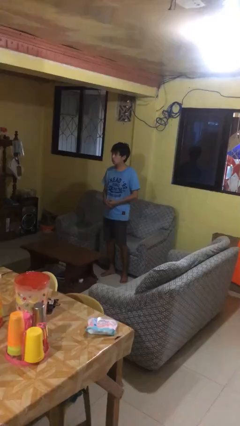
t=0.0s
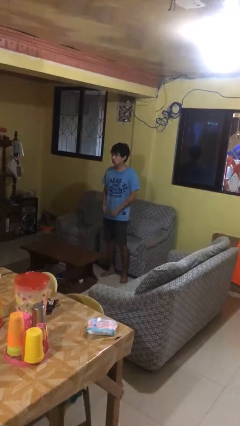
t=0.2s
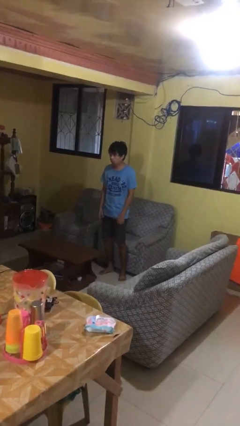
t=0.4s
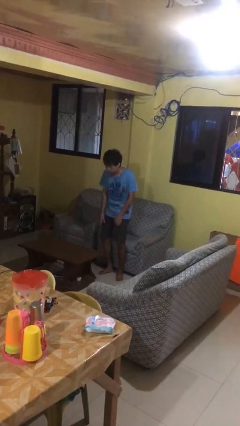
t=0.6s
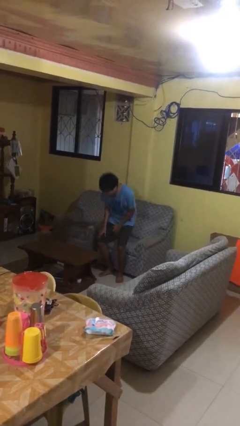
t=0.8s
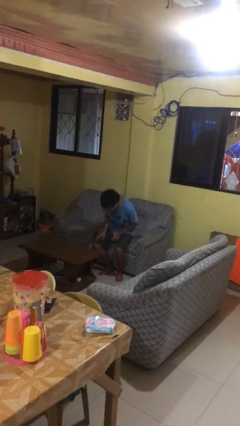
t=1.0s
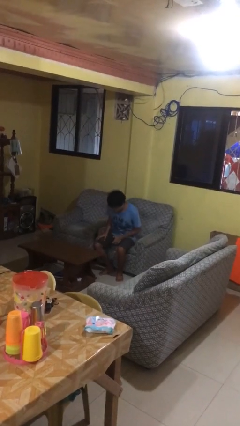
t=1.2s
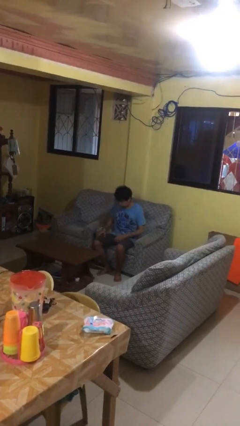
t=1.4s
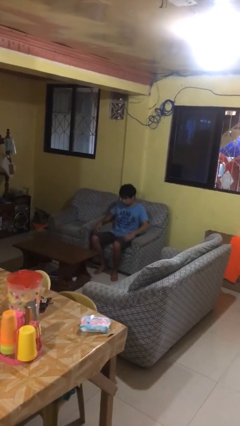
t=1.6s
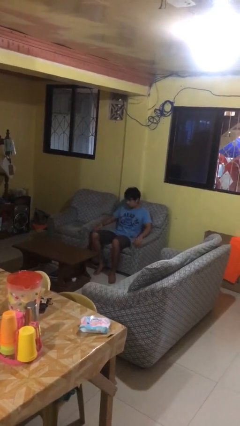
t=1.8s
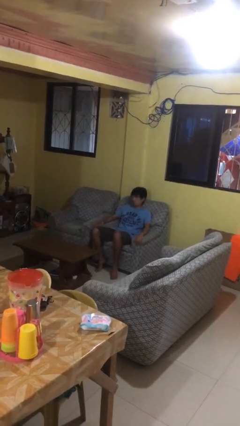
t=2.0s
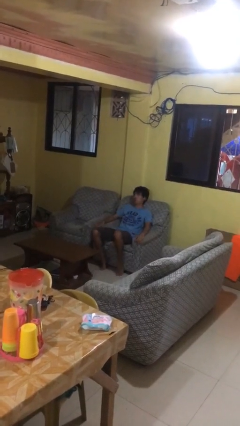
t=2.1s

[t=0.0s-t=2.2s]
person lies down on couch

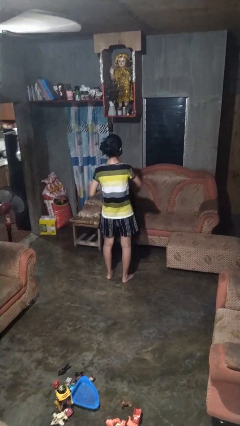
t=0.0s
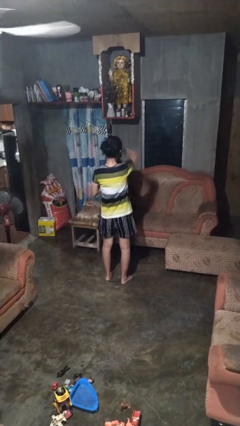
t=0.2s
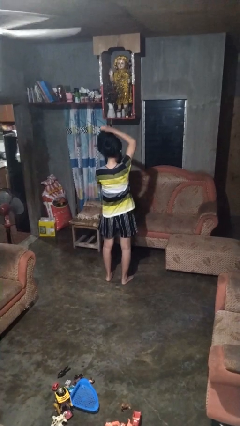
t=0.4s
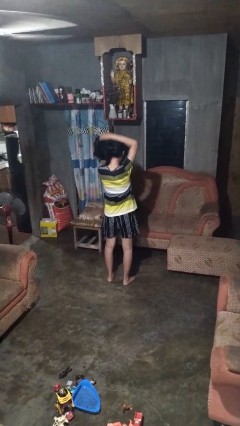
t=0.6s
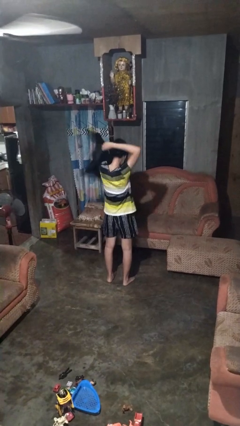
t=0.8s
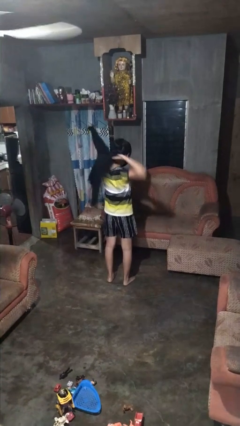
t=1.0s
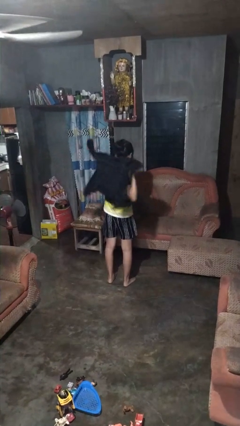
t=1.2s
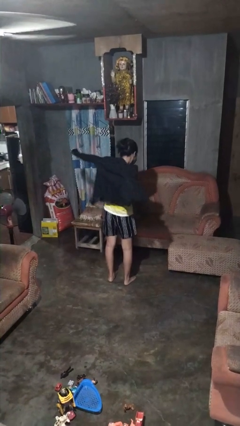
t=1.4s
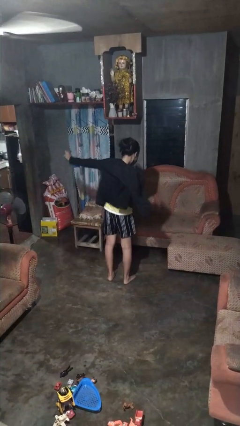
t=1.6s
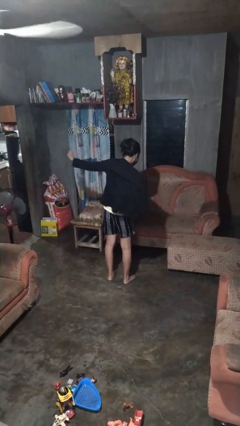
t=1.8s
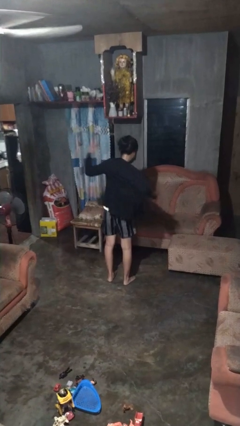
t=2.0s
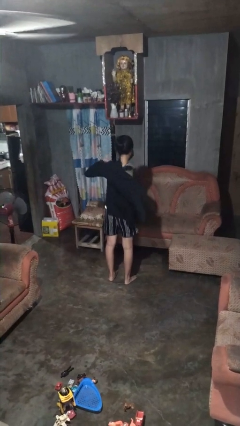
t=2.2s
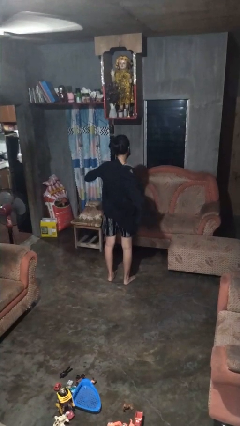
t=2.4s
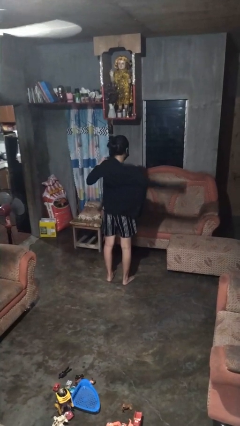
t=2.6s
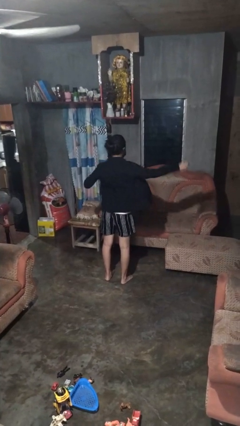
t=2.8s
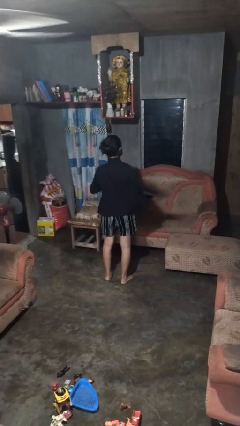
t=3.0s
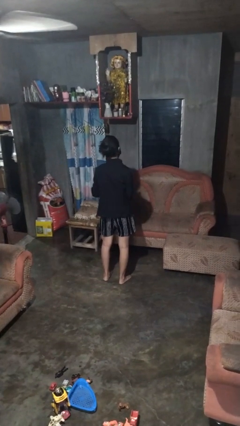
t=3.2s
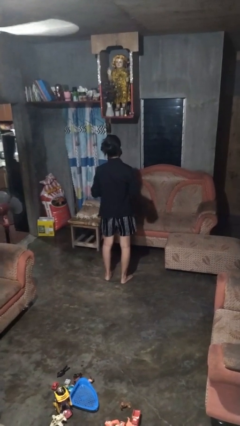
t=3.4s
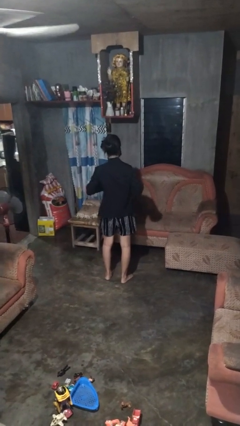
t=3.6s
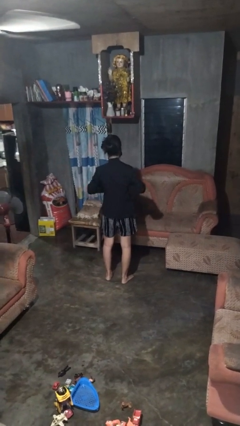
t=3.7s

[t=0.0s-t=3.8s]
person puts on shirt

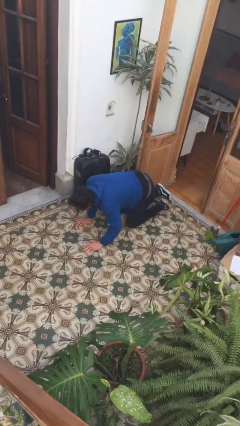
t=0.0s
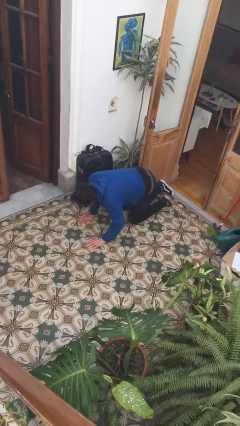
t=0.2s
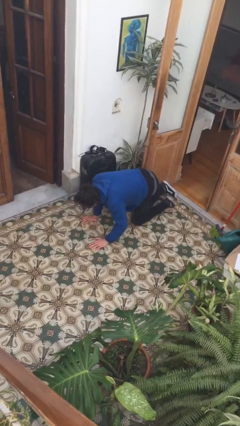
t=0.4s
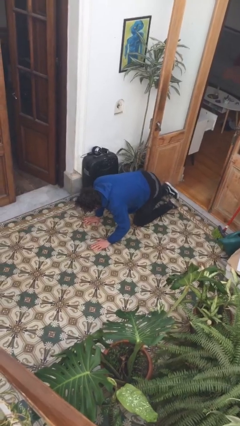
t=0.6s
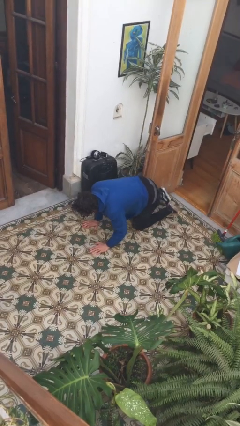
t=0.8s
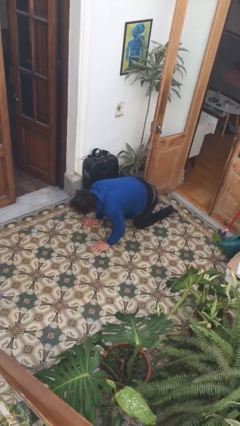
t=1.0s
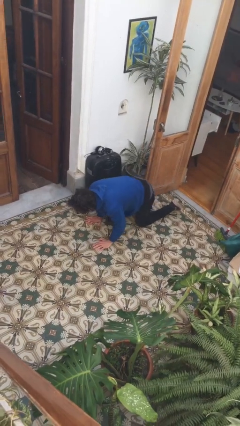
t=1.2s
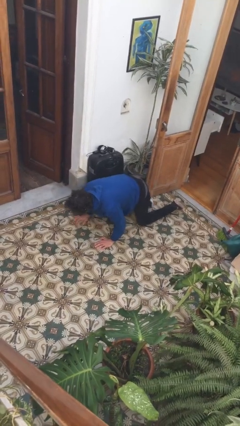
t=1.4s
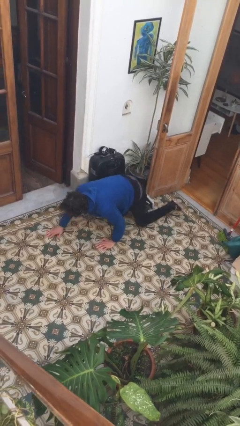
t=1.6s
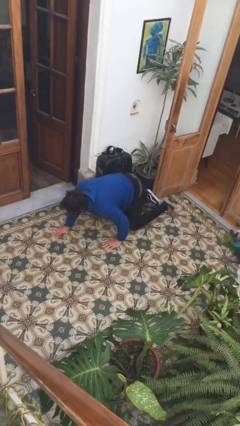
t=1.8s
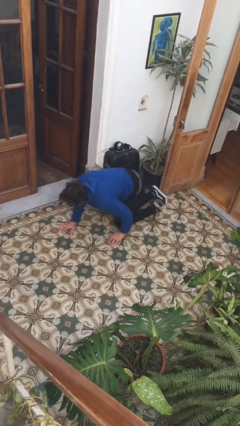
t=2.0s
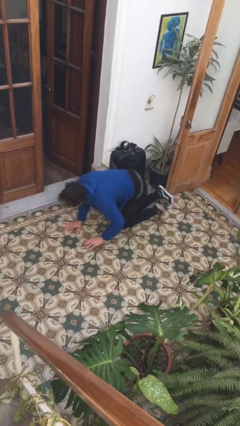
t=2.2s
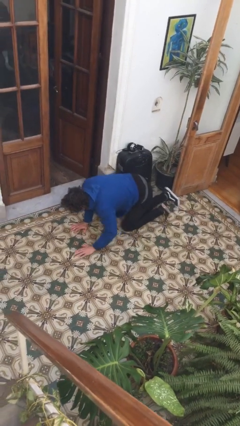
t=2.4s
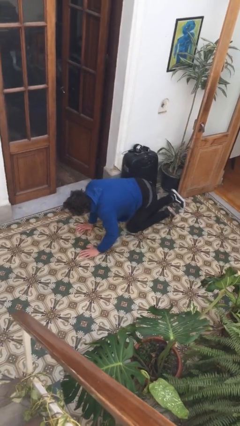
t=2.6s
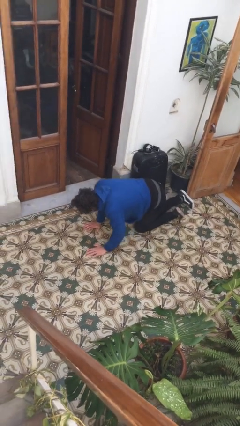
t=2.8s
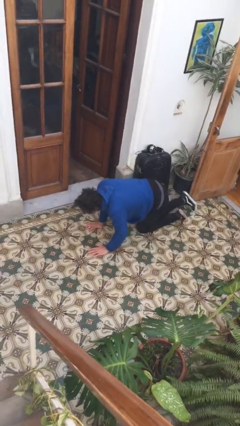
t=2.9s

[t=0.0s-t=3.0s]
person crawls

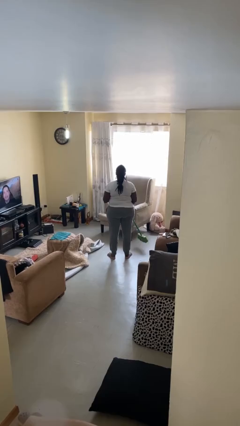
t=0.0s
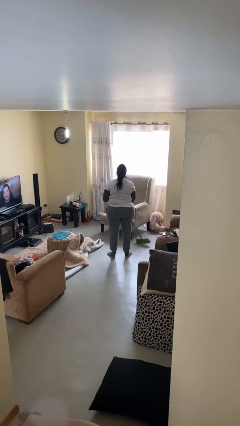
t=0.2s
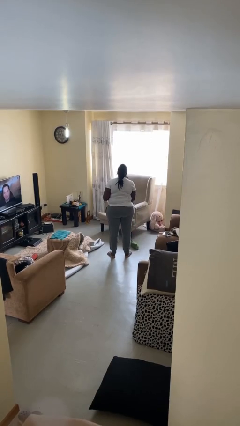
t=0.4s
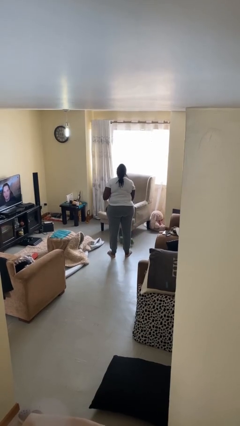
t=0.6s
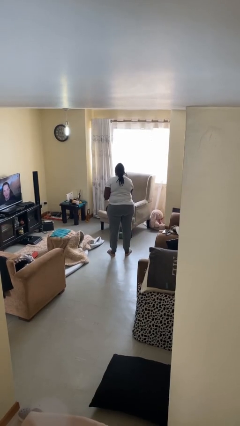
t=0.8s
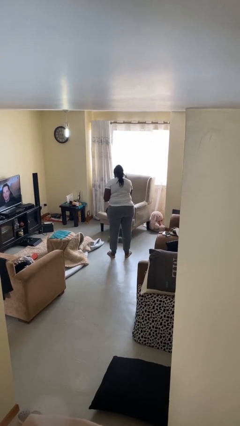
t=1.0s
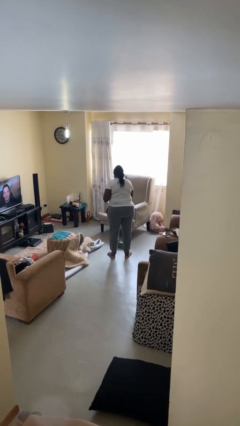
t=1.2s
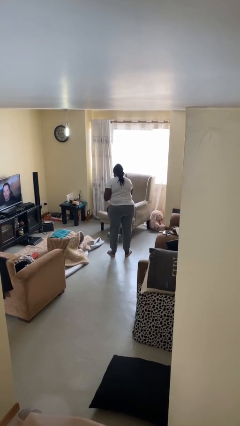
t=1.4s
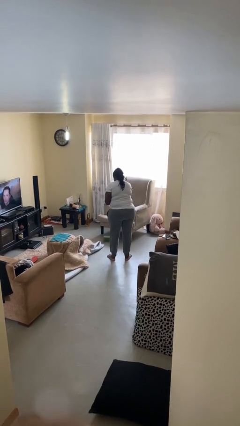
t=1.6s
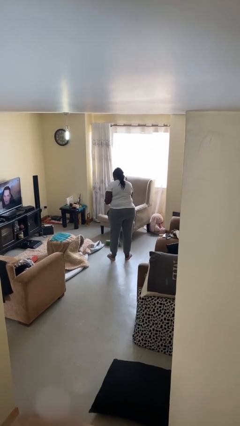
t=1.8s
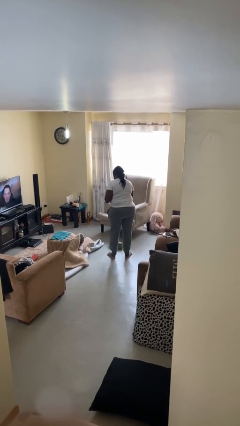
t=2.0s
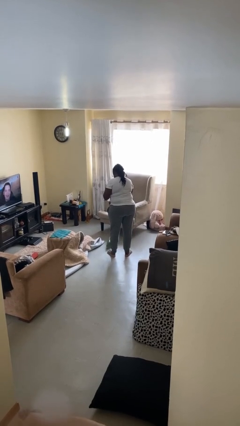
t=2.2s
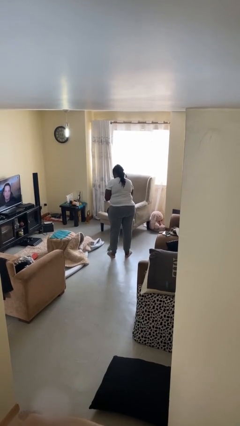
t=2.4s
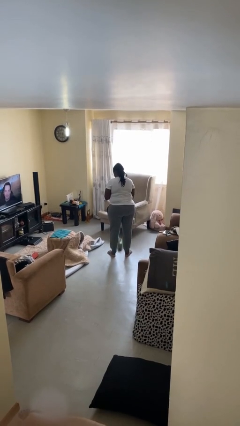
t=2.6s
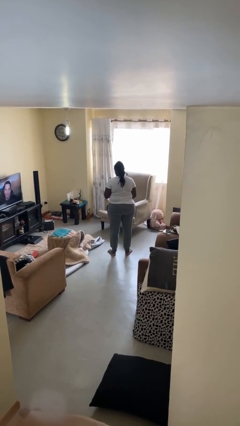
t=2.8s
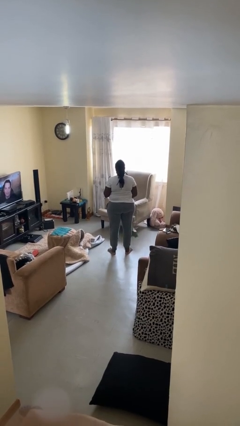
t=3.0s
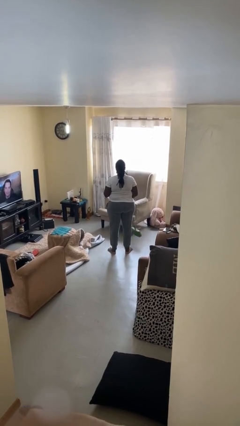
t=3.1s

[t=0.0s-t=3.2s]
person sweeps floor

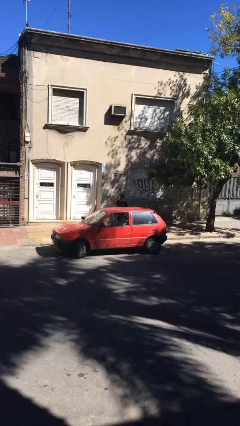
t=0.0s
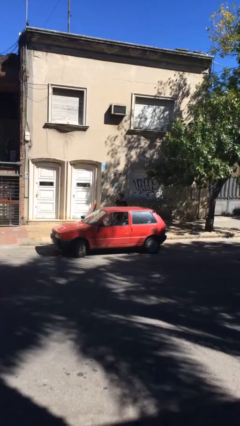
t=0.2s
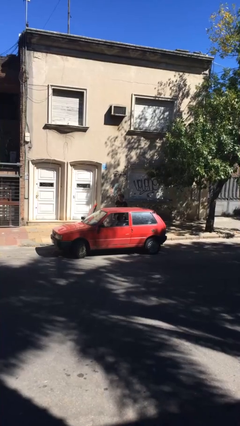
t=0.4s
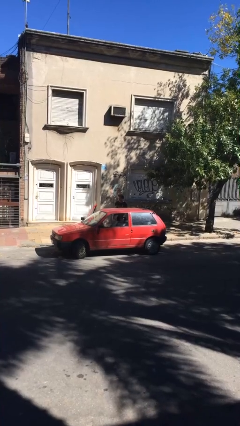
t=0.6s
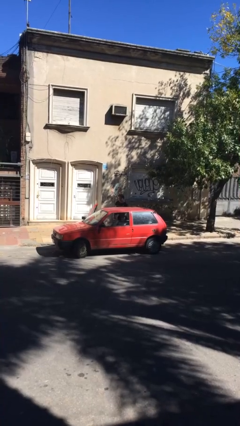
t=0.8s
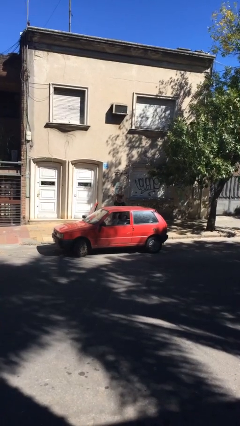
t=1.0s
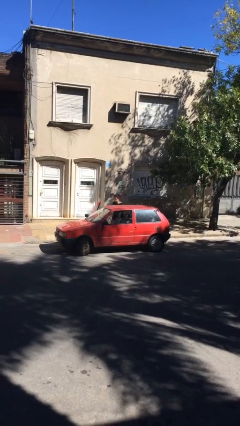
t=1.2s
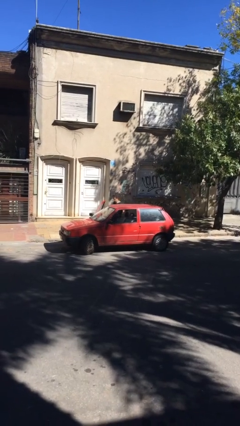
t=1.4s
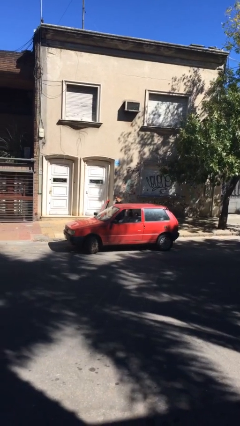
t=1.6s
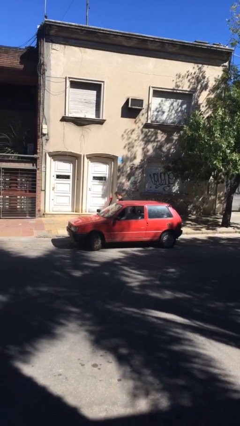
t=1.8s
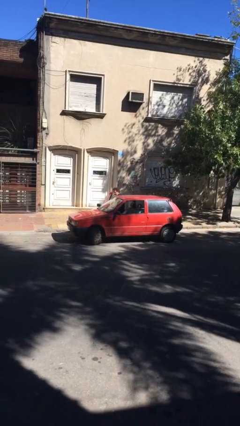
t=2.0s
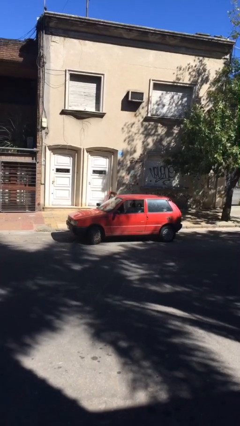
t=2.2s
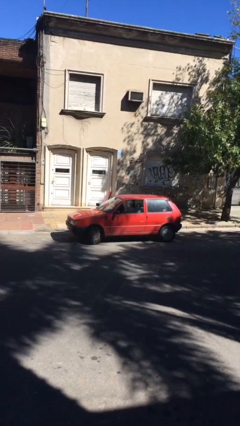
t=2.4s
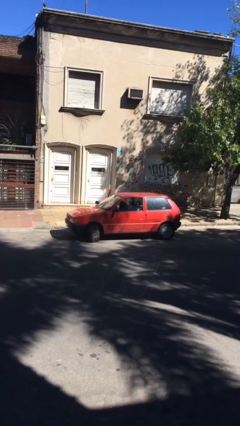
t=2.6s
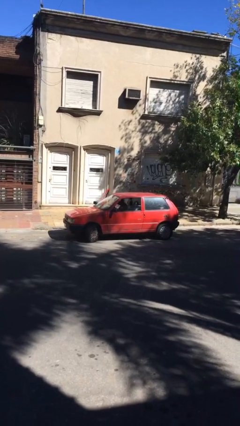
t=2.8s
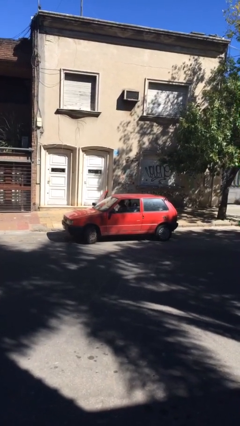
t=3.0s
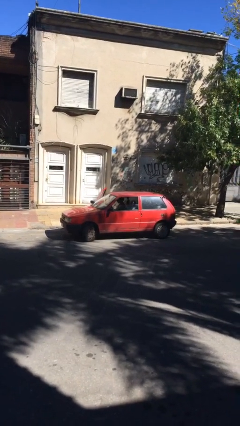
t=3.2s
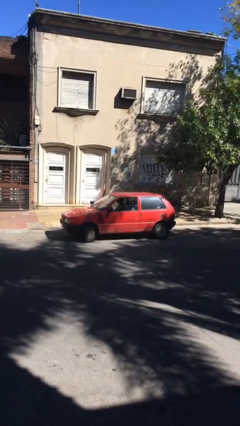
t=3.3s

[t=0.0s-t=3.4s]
person enters car

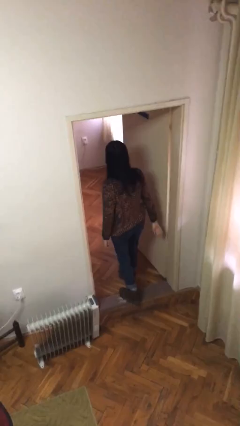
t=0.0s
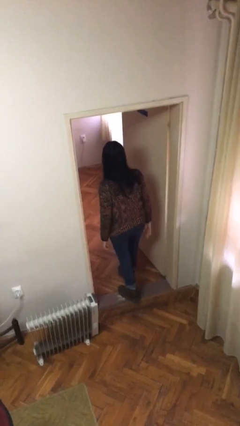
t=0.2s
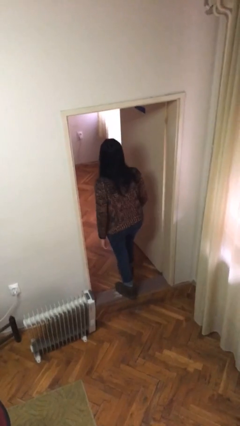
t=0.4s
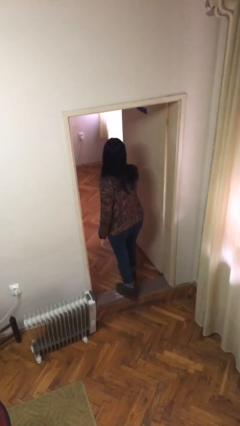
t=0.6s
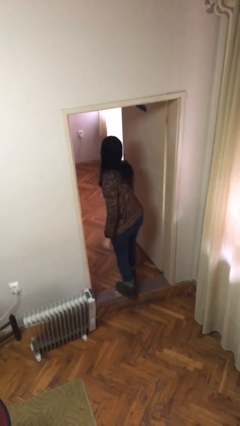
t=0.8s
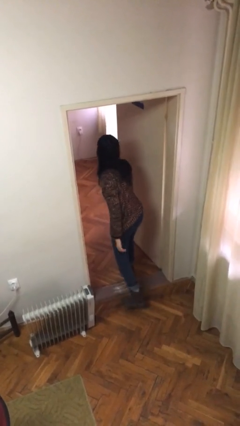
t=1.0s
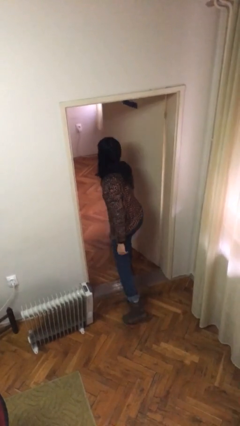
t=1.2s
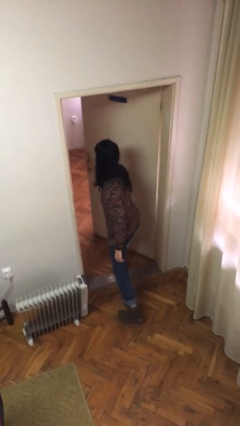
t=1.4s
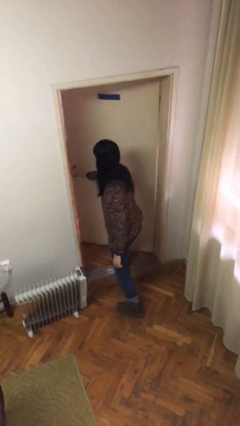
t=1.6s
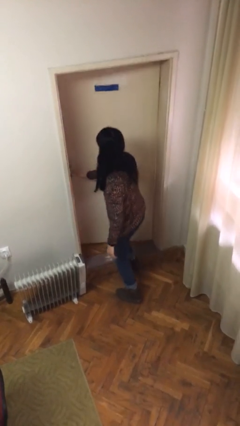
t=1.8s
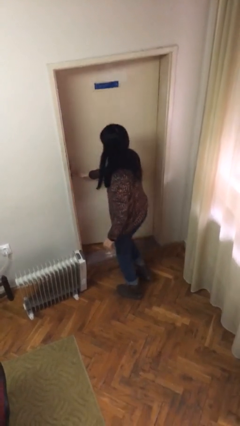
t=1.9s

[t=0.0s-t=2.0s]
person closes facility door
